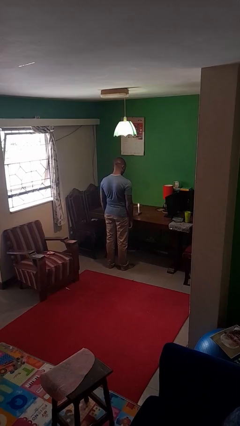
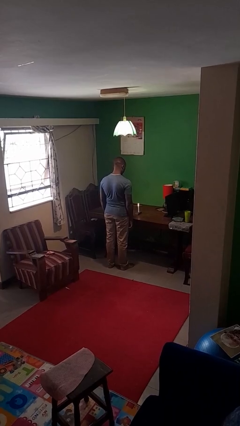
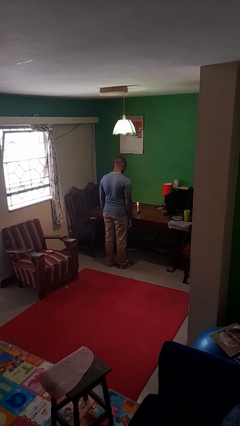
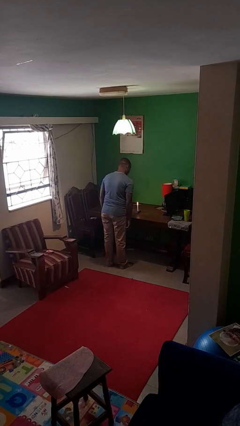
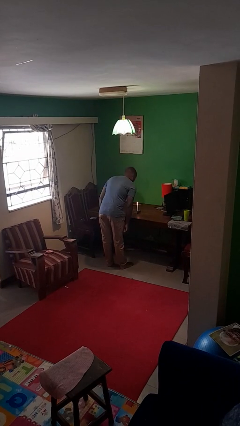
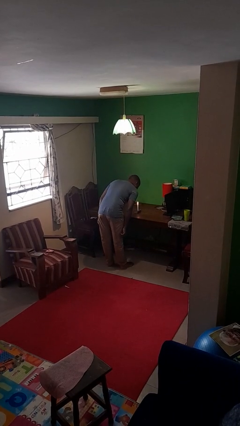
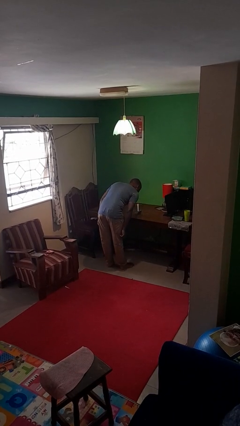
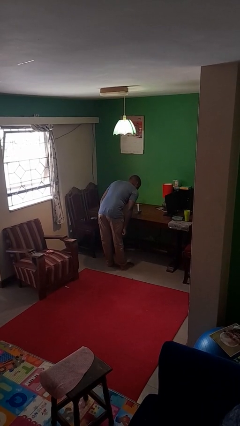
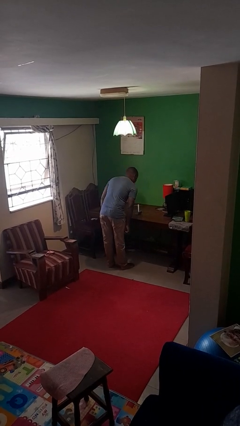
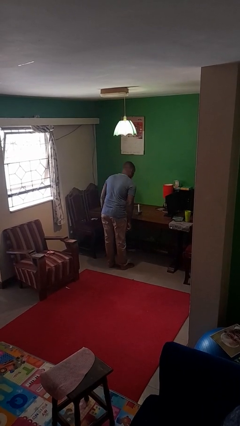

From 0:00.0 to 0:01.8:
person extinguishes candle

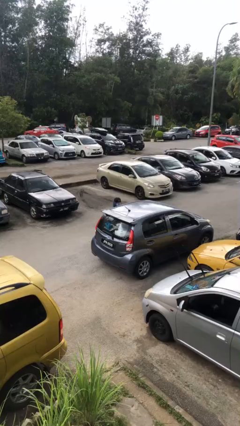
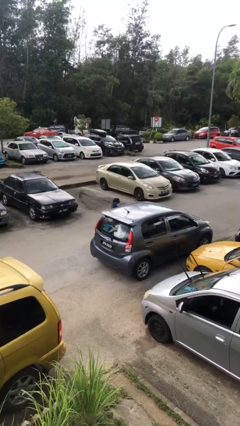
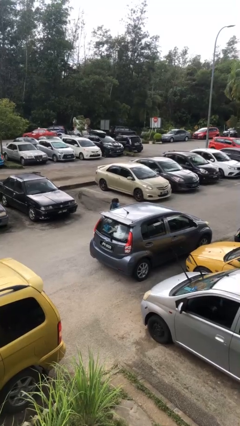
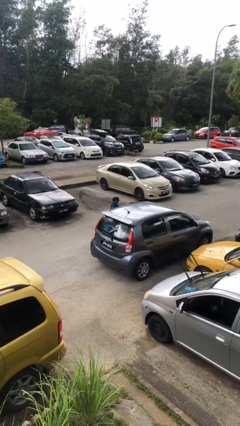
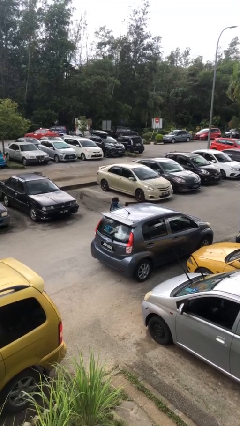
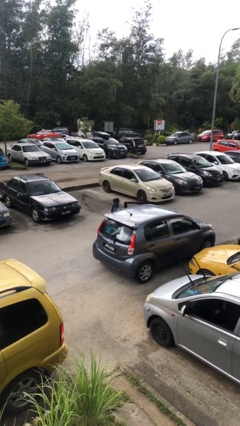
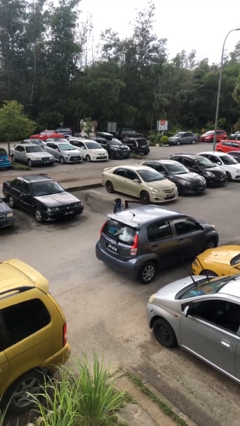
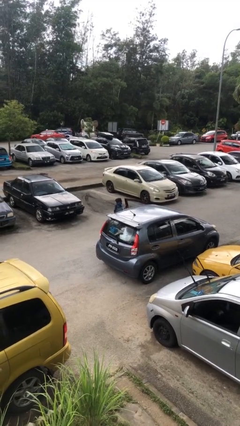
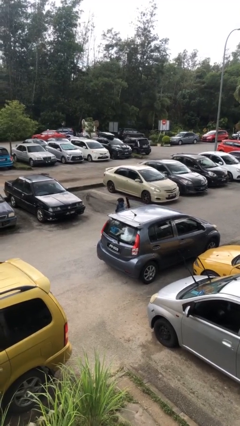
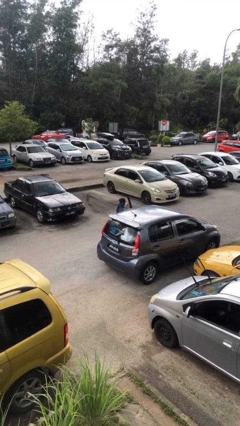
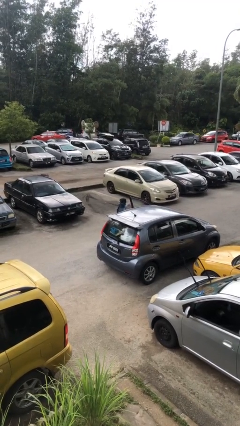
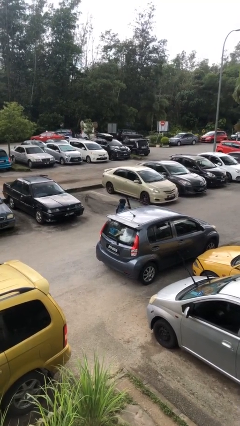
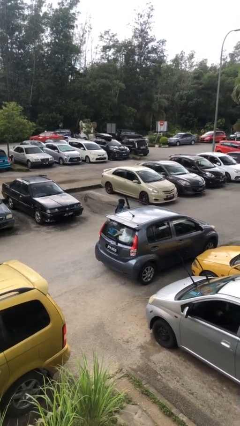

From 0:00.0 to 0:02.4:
person opens car door

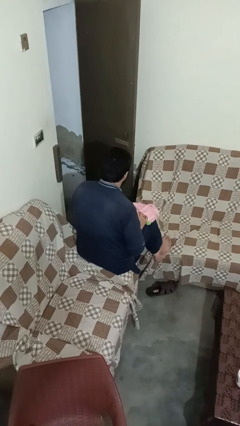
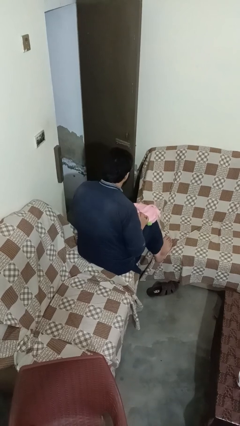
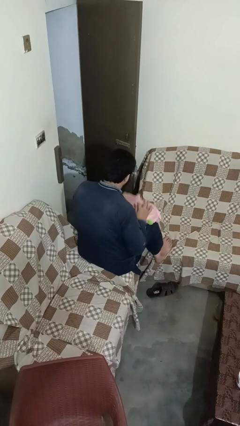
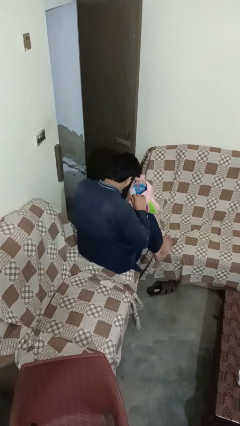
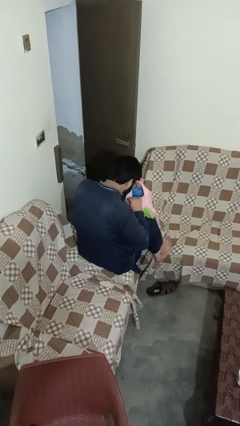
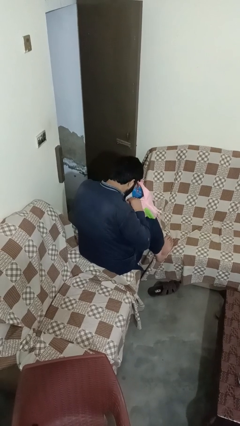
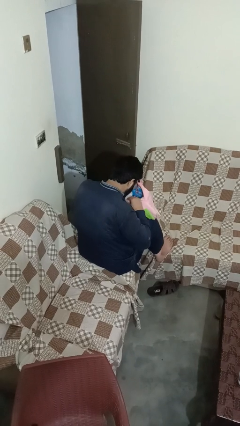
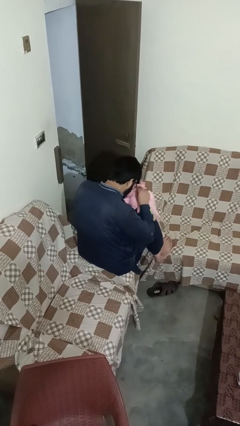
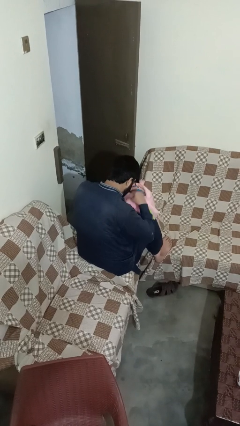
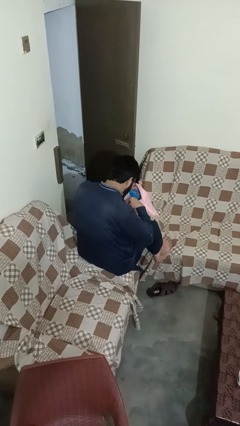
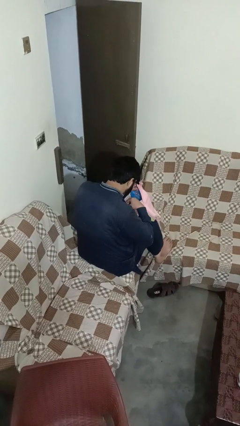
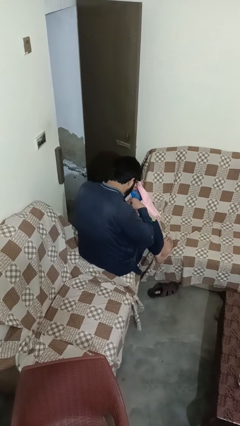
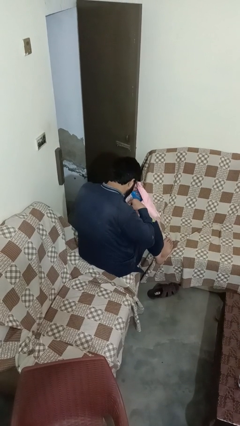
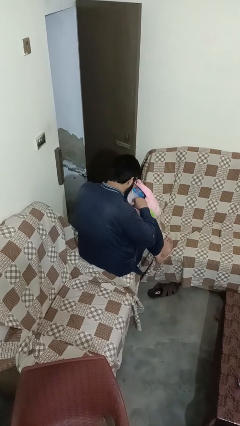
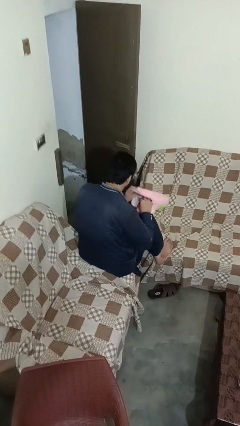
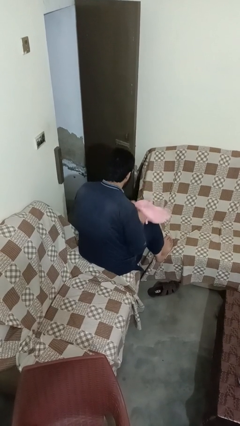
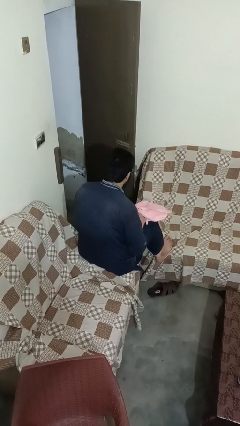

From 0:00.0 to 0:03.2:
person searches in bag

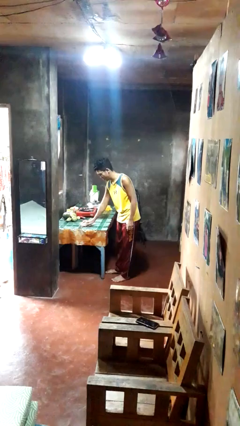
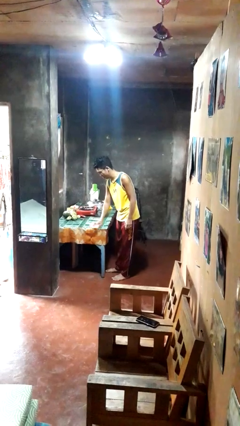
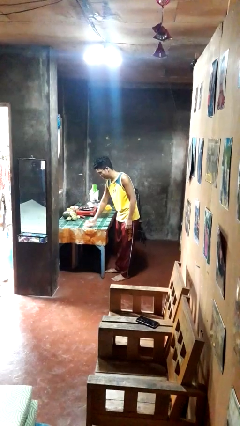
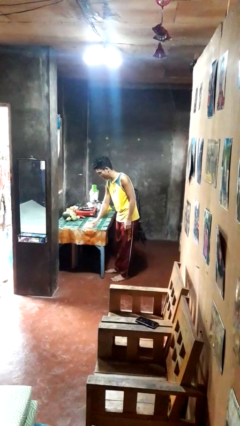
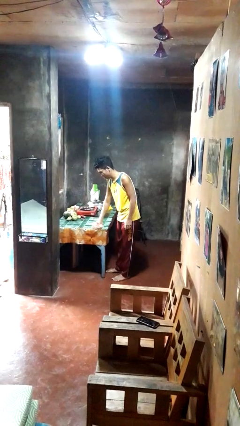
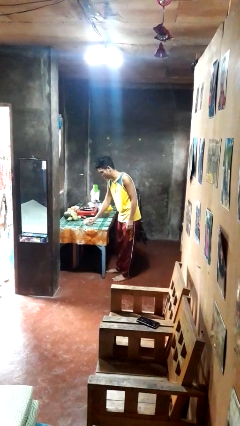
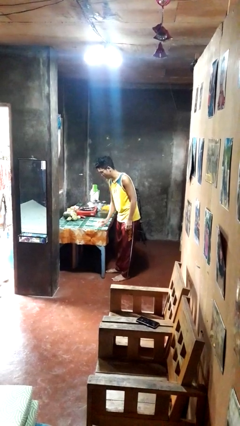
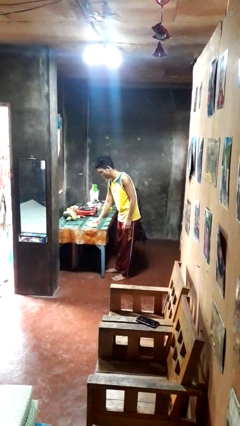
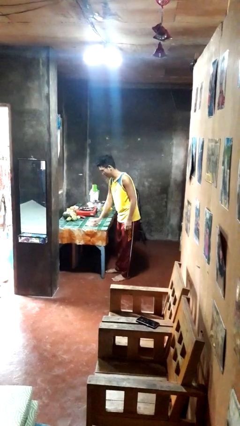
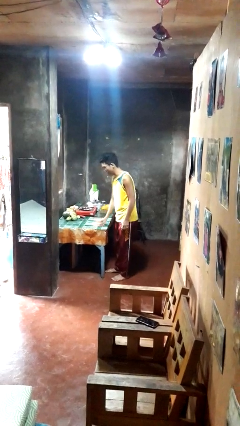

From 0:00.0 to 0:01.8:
person cleans table with rag

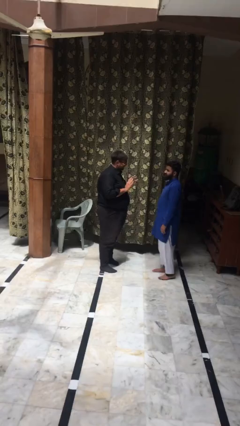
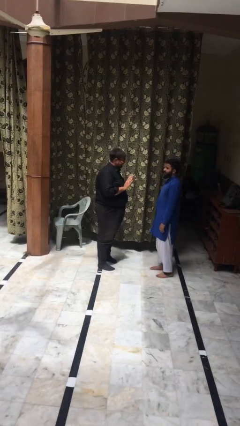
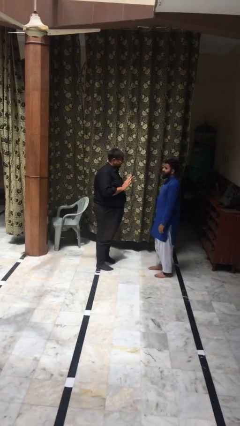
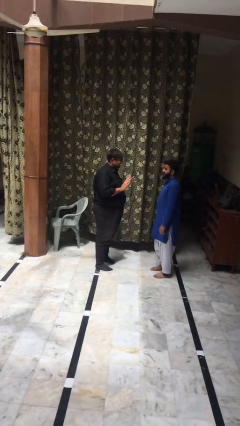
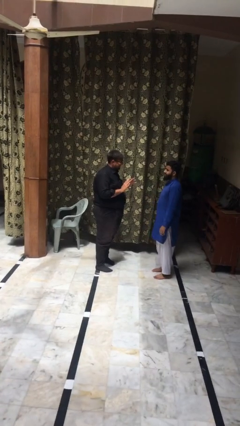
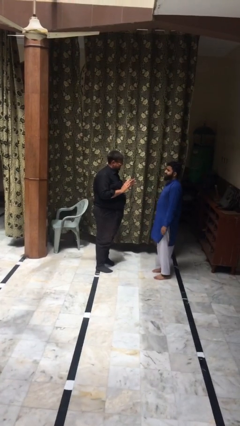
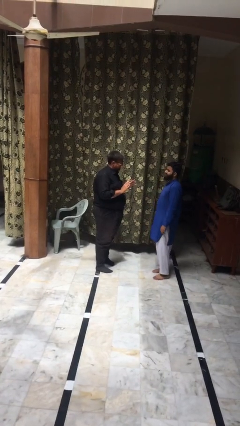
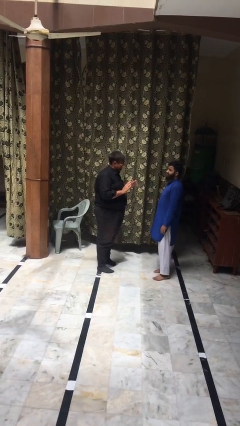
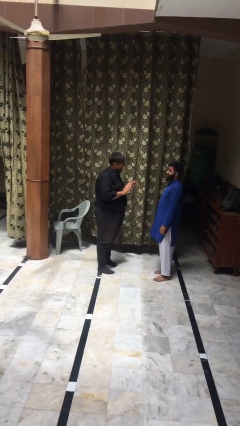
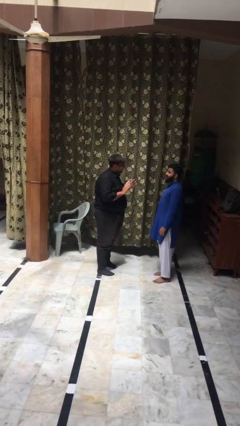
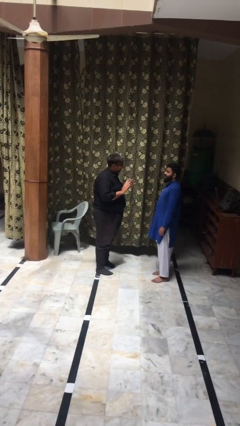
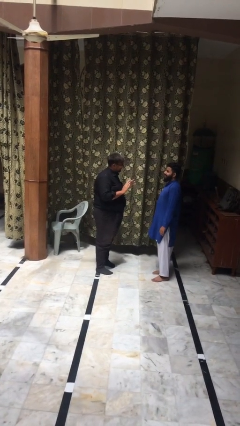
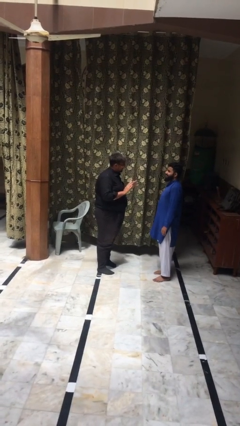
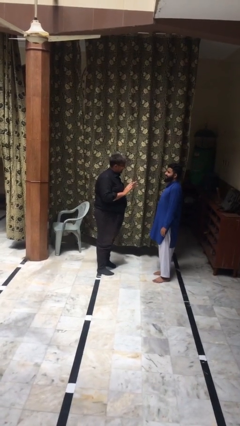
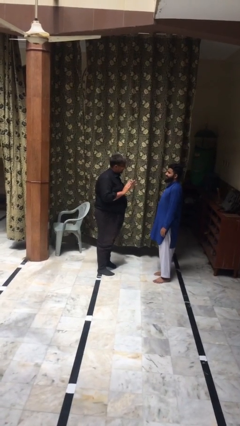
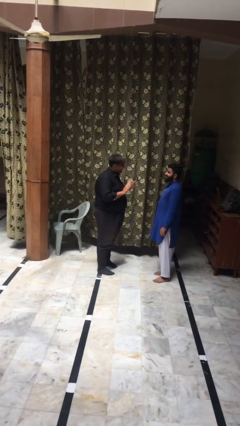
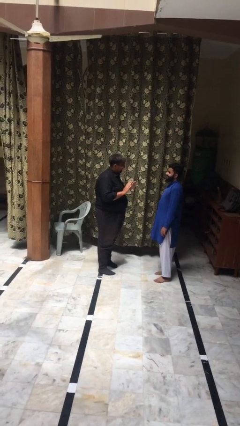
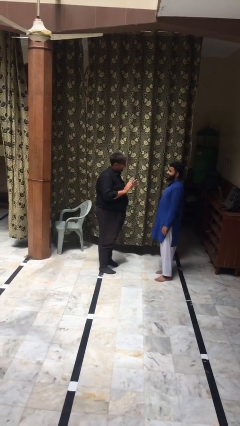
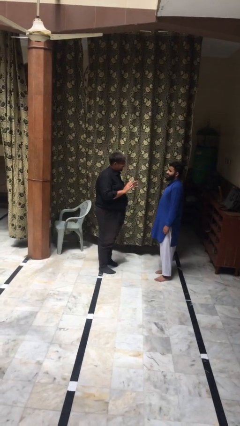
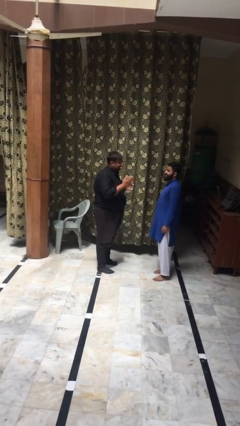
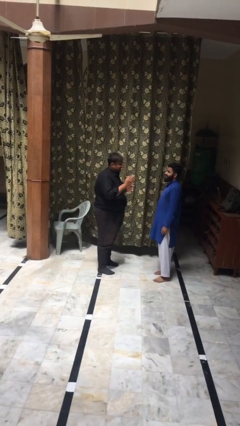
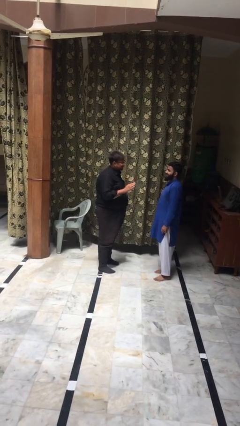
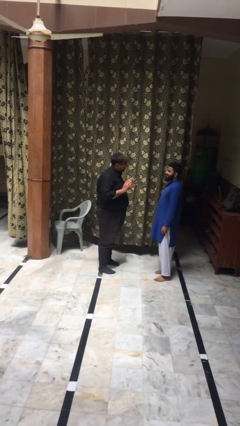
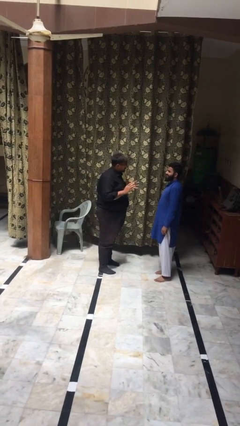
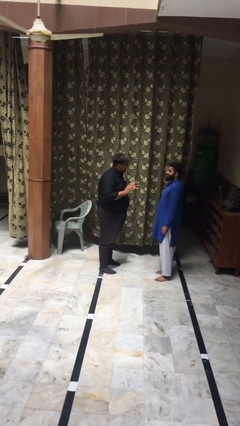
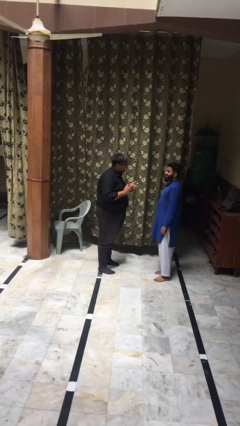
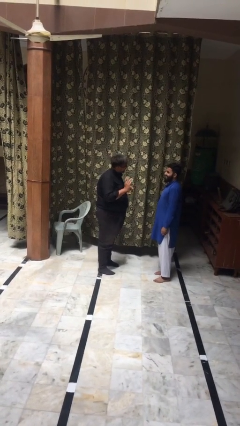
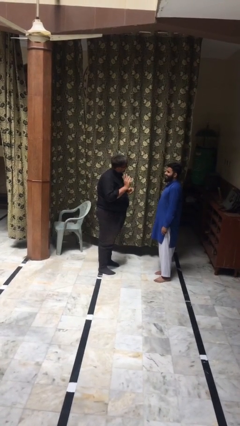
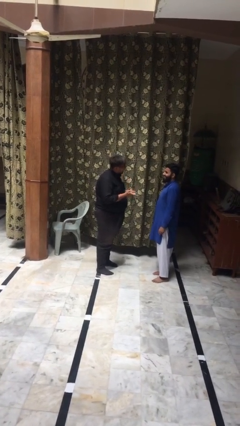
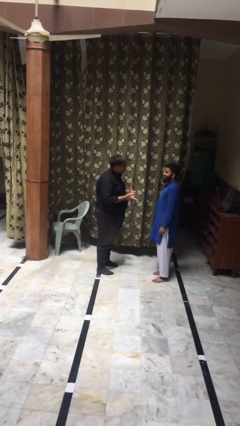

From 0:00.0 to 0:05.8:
person talks to person

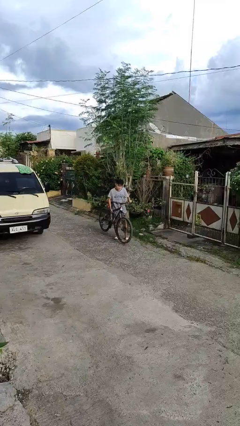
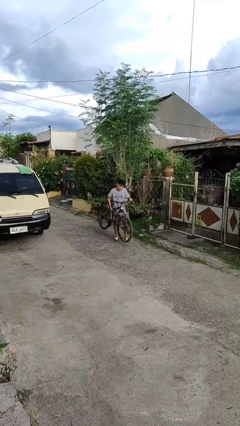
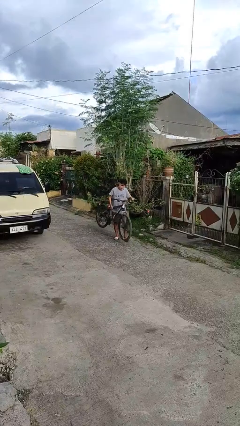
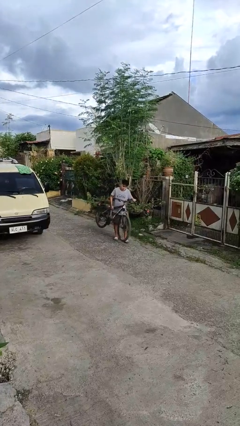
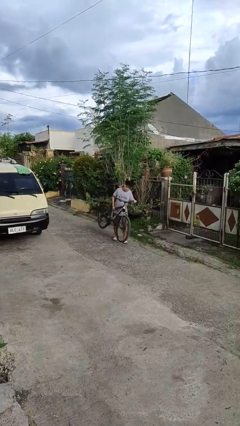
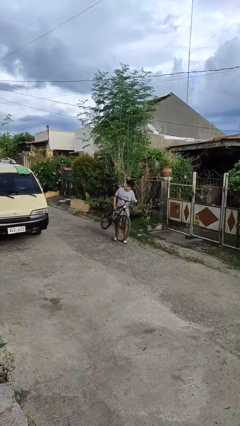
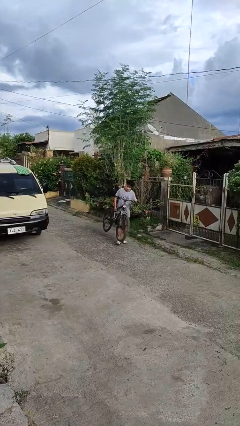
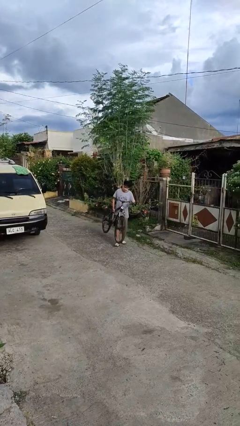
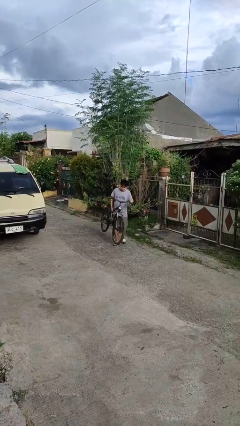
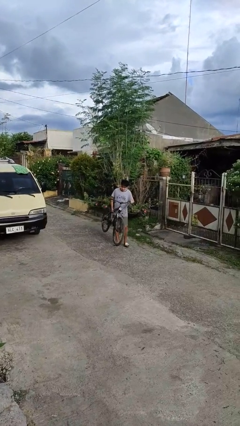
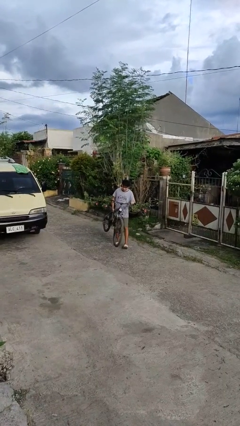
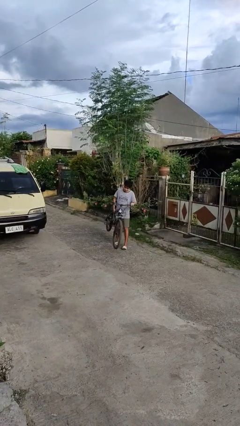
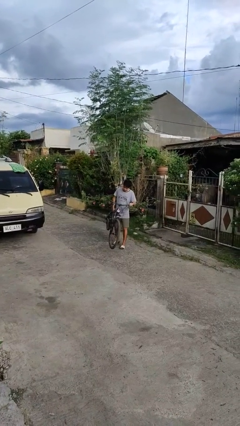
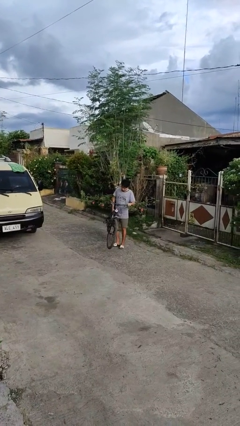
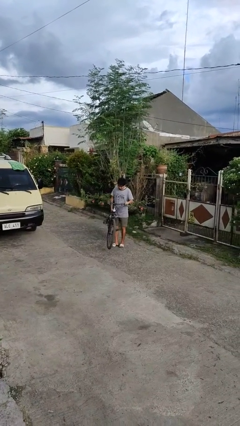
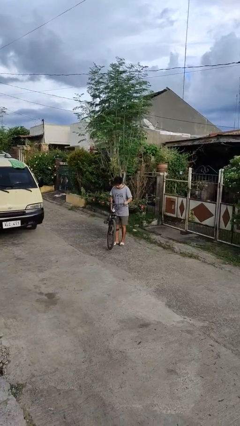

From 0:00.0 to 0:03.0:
person carries bicycle
